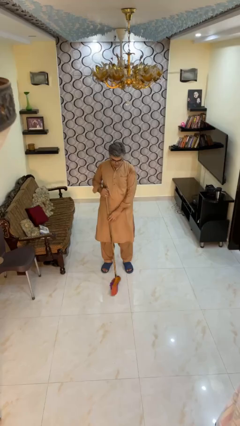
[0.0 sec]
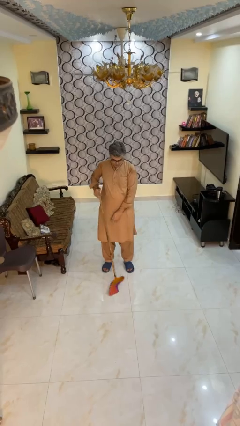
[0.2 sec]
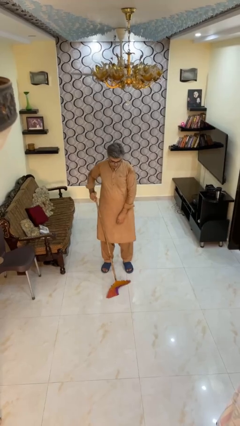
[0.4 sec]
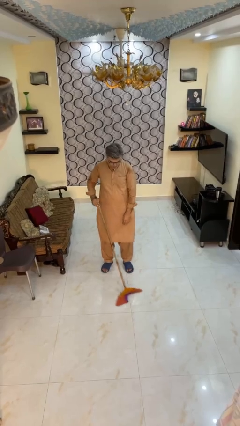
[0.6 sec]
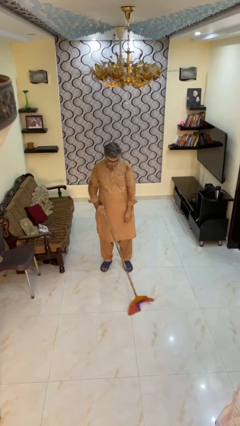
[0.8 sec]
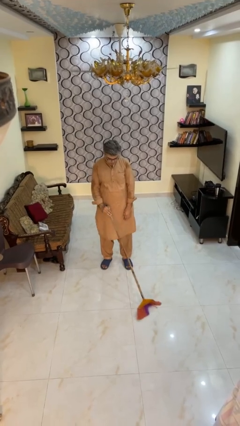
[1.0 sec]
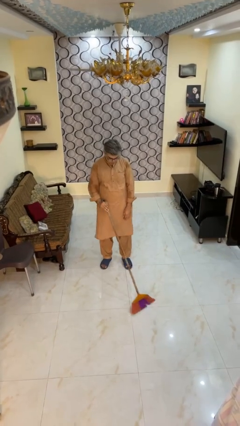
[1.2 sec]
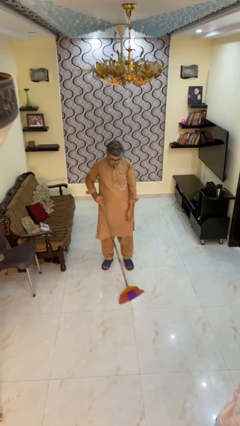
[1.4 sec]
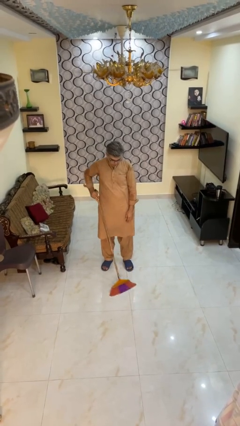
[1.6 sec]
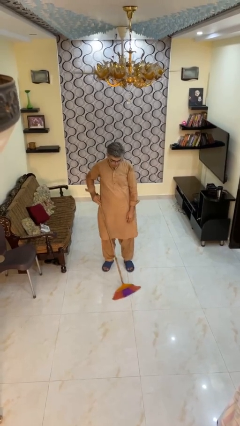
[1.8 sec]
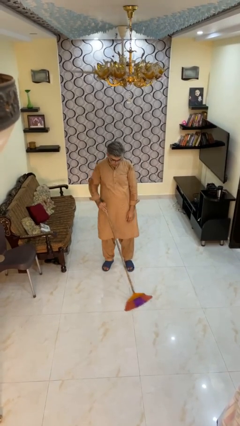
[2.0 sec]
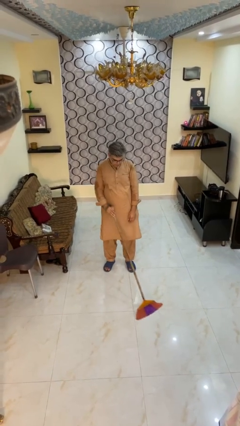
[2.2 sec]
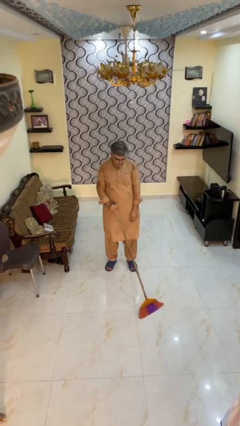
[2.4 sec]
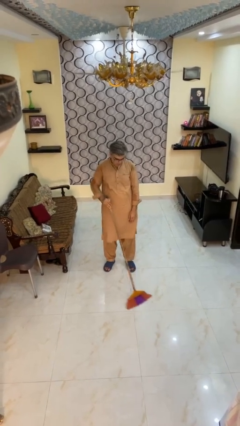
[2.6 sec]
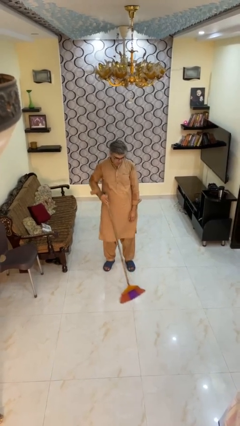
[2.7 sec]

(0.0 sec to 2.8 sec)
person mops

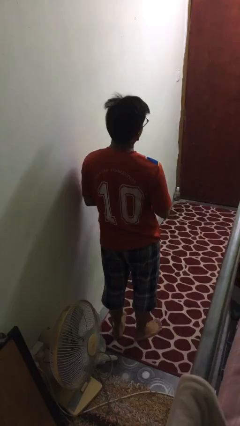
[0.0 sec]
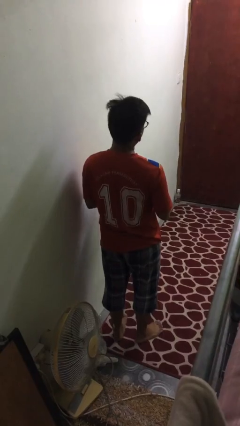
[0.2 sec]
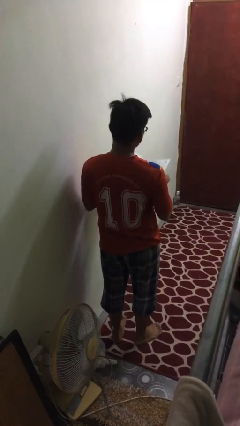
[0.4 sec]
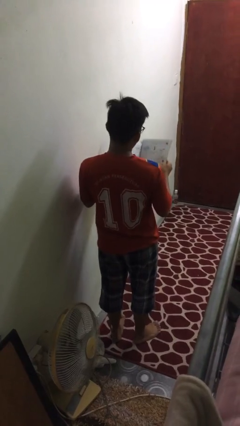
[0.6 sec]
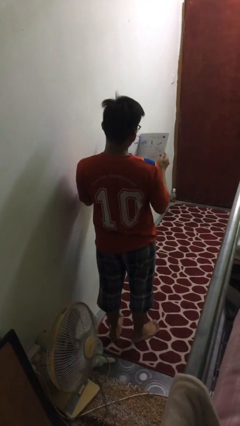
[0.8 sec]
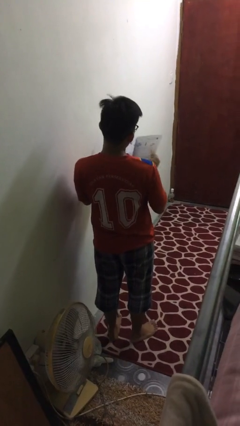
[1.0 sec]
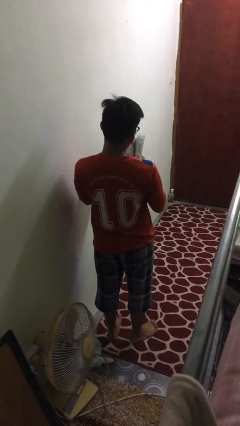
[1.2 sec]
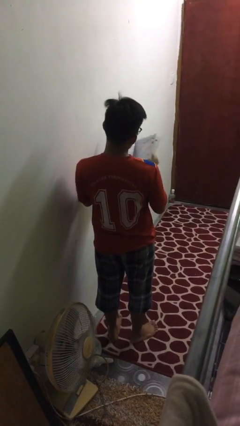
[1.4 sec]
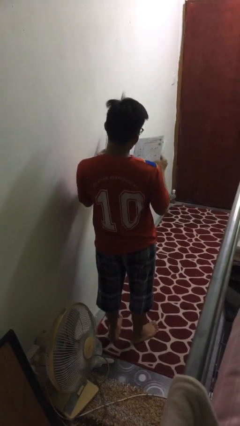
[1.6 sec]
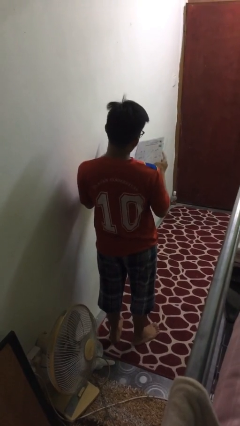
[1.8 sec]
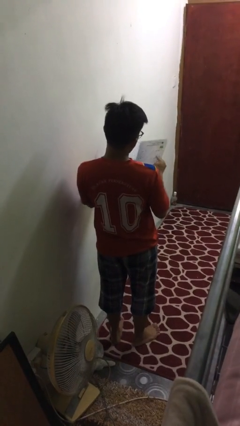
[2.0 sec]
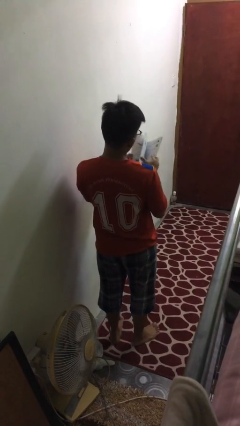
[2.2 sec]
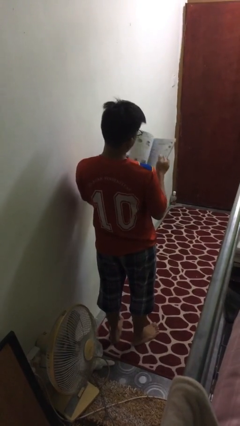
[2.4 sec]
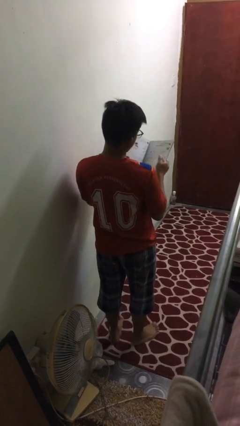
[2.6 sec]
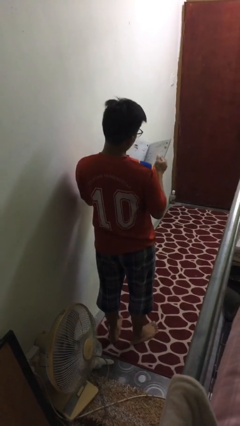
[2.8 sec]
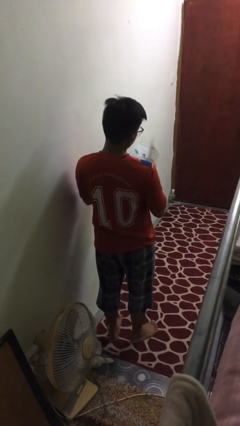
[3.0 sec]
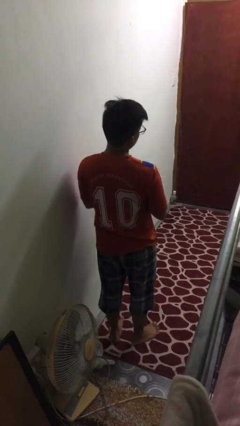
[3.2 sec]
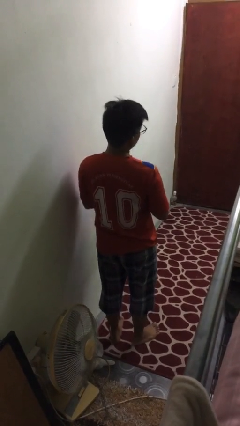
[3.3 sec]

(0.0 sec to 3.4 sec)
person reads magazine

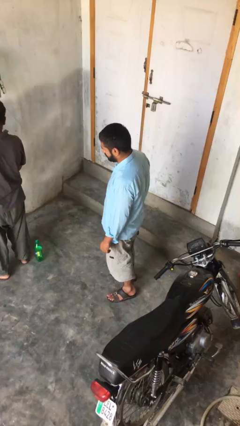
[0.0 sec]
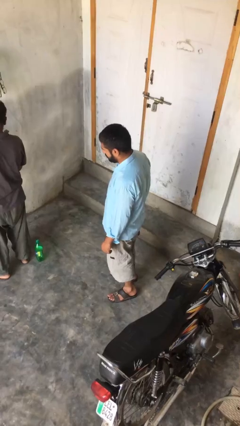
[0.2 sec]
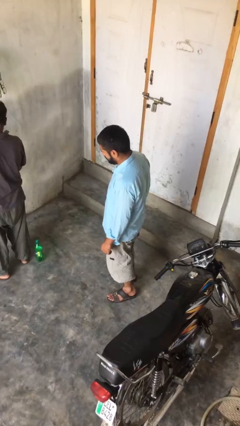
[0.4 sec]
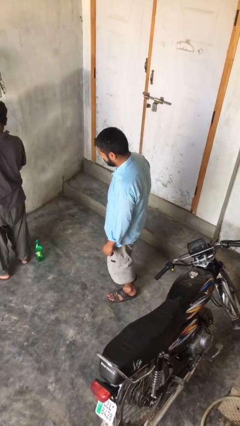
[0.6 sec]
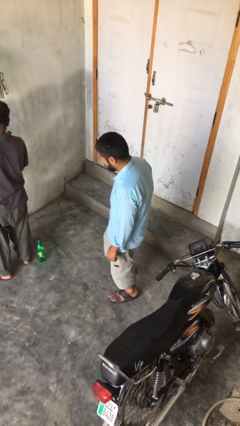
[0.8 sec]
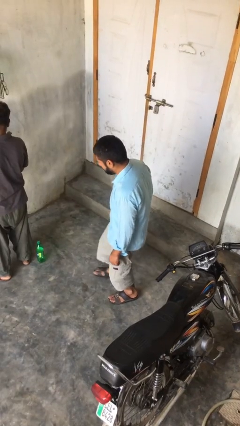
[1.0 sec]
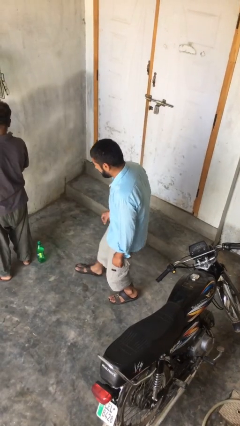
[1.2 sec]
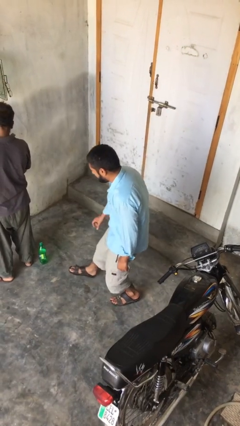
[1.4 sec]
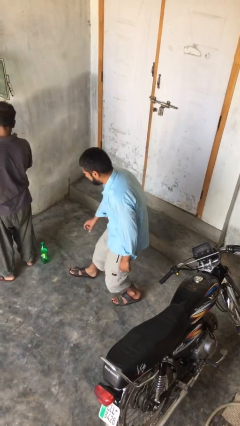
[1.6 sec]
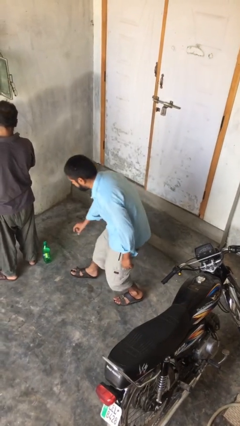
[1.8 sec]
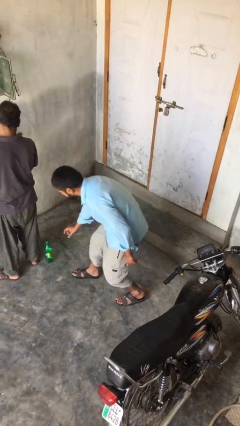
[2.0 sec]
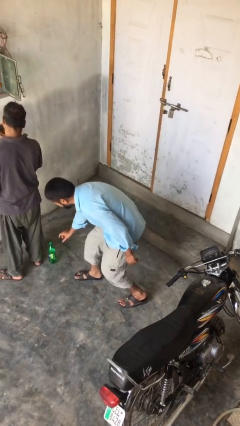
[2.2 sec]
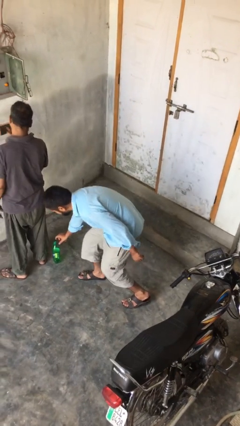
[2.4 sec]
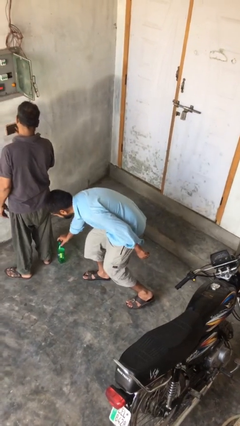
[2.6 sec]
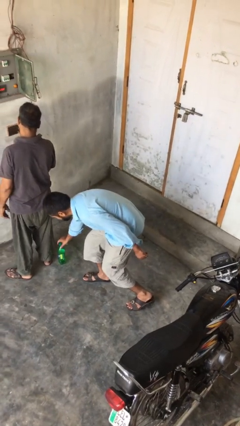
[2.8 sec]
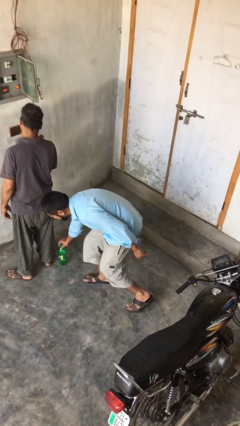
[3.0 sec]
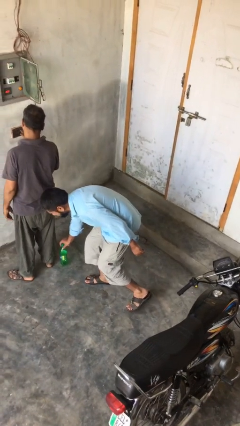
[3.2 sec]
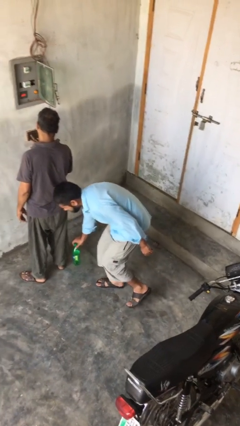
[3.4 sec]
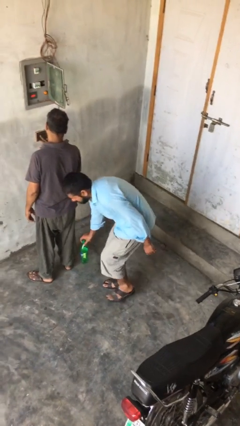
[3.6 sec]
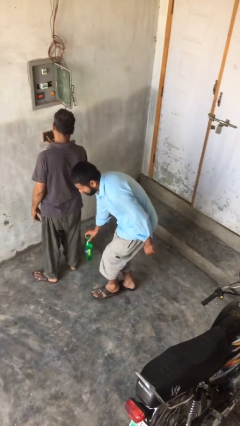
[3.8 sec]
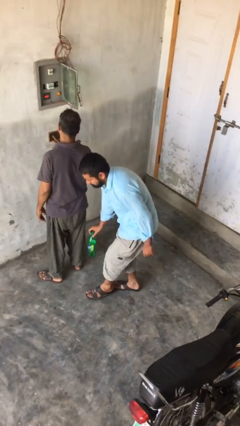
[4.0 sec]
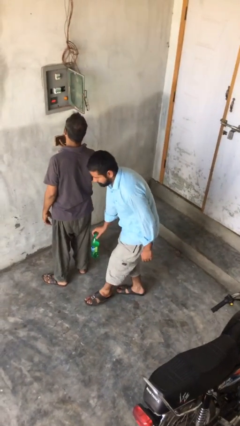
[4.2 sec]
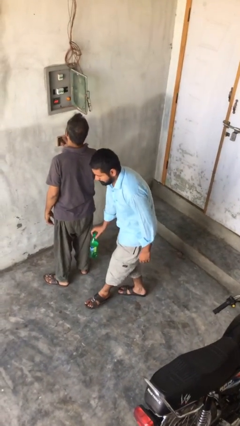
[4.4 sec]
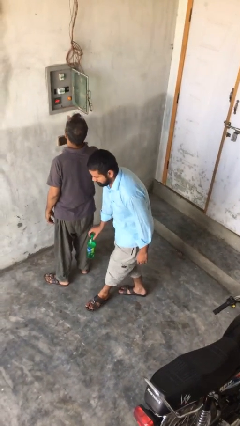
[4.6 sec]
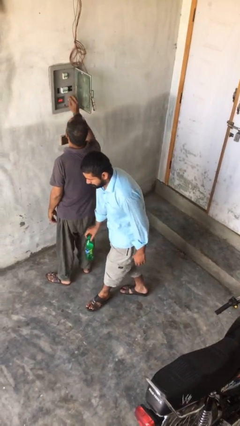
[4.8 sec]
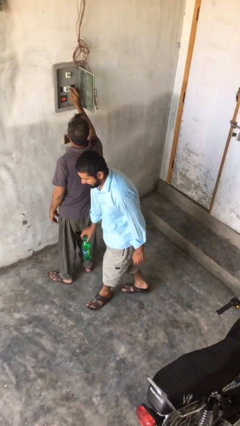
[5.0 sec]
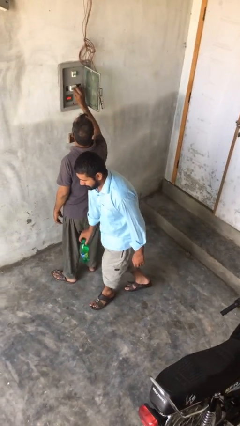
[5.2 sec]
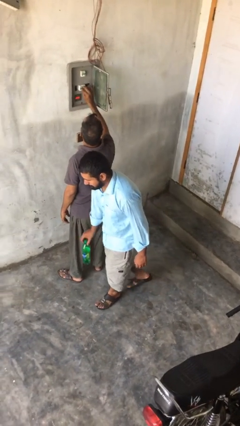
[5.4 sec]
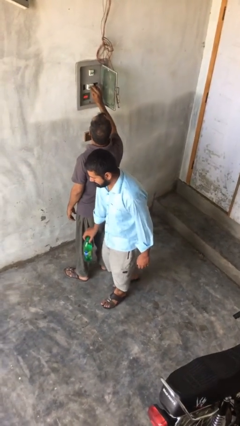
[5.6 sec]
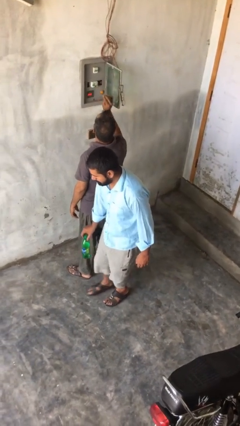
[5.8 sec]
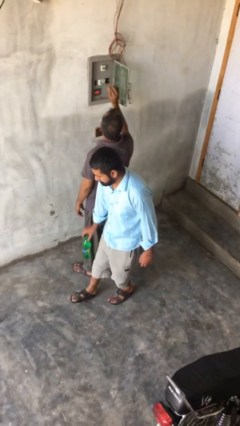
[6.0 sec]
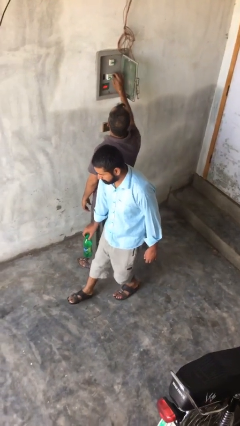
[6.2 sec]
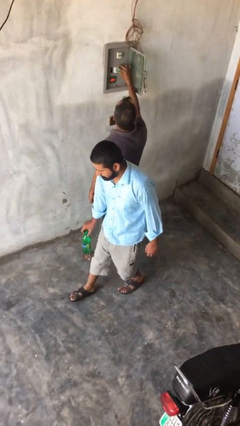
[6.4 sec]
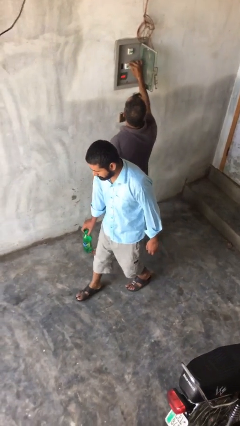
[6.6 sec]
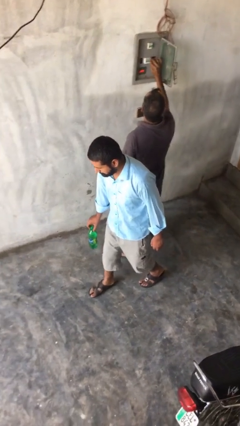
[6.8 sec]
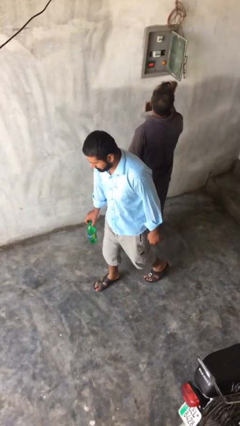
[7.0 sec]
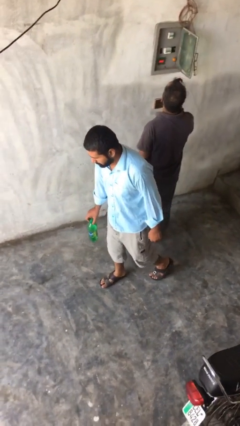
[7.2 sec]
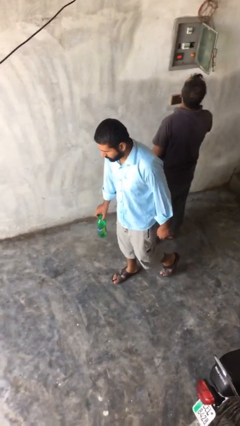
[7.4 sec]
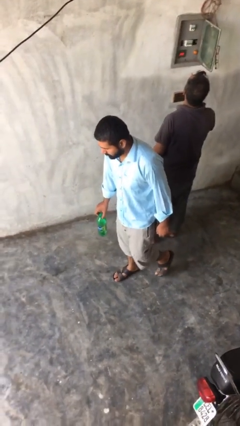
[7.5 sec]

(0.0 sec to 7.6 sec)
person steals object from person

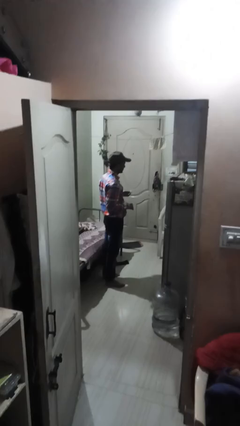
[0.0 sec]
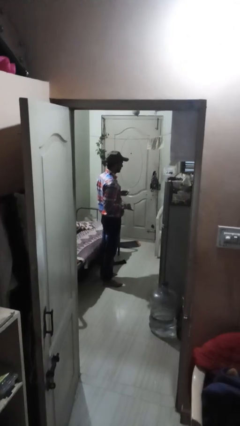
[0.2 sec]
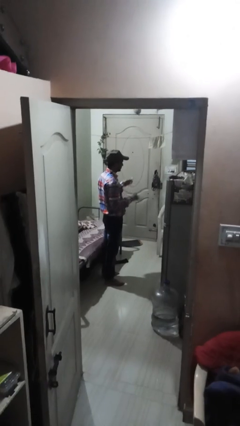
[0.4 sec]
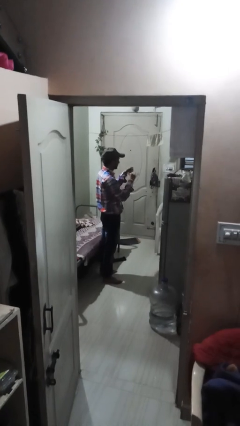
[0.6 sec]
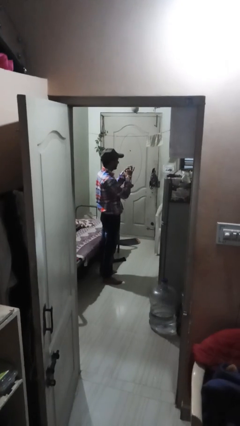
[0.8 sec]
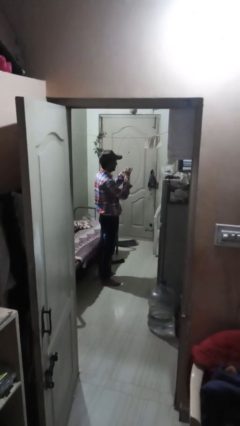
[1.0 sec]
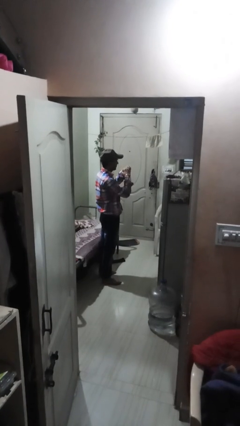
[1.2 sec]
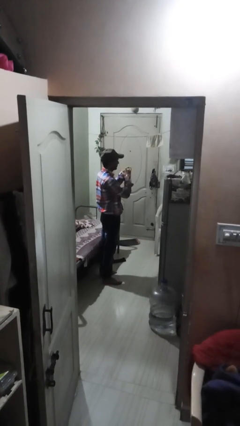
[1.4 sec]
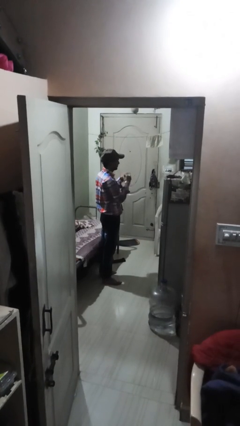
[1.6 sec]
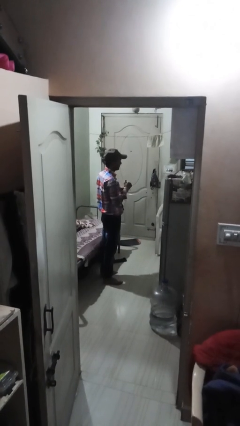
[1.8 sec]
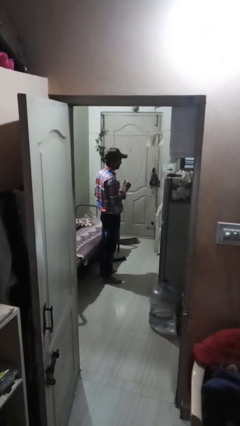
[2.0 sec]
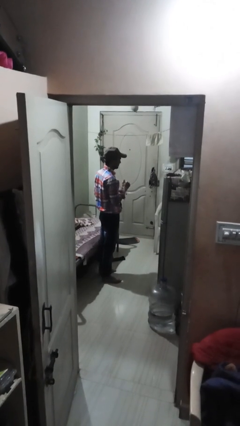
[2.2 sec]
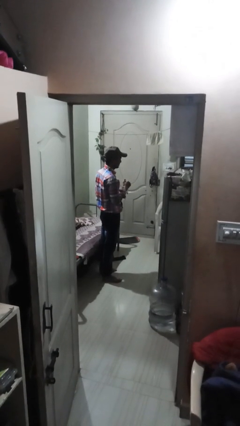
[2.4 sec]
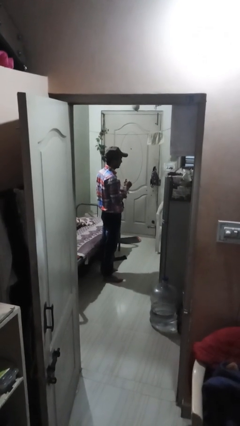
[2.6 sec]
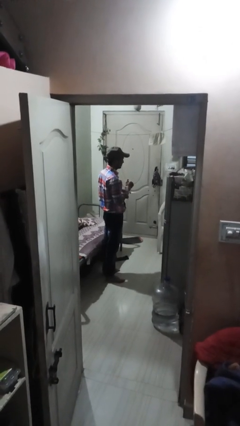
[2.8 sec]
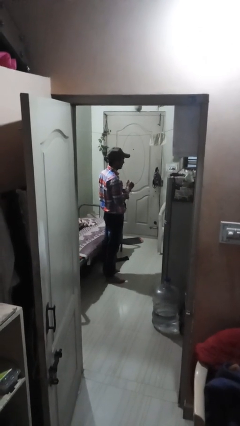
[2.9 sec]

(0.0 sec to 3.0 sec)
person puts on ring

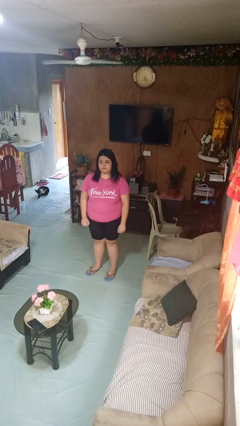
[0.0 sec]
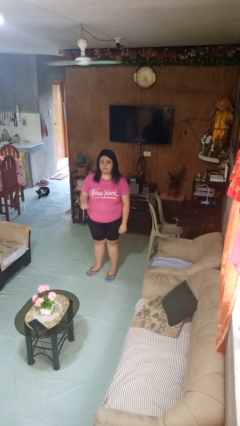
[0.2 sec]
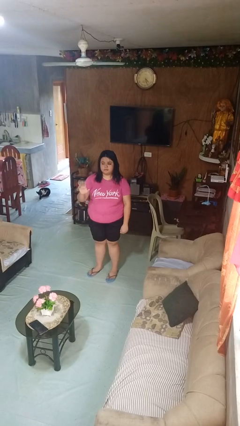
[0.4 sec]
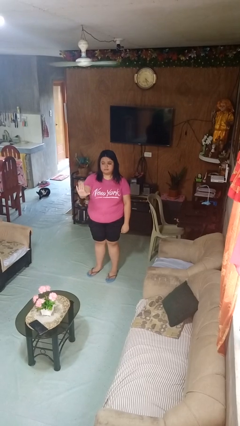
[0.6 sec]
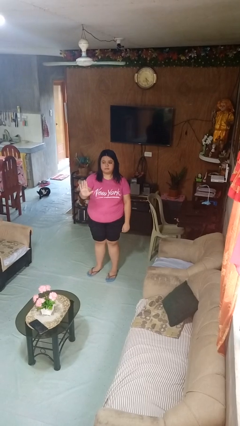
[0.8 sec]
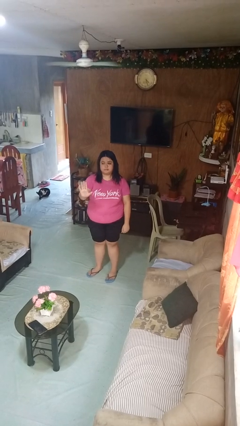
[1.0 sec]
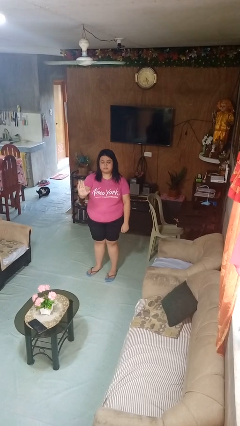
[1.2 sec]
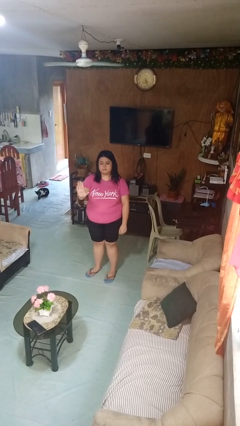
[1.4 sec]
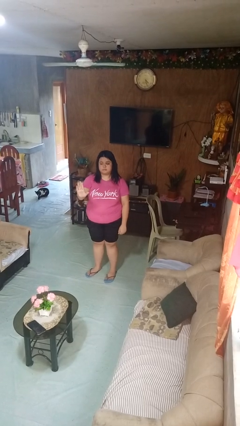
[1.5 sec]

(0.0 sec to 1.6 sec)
person gestures stop
